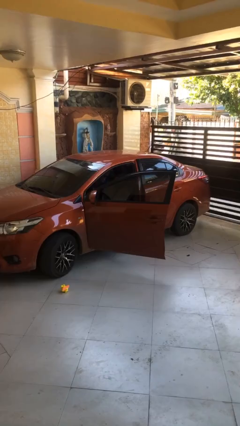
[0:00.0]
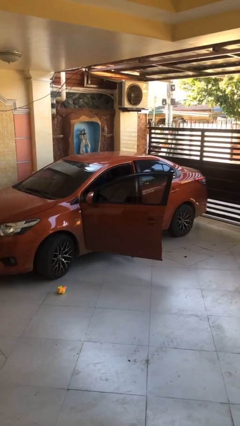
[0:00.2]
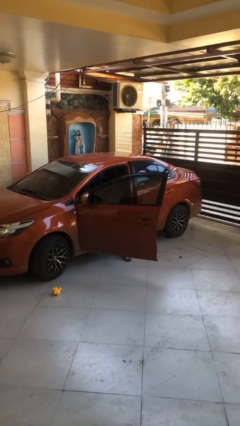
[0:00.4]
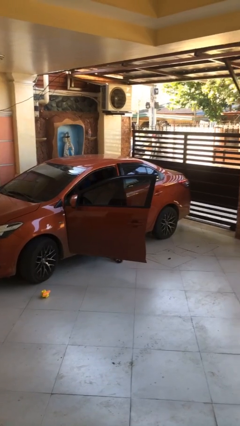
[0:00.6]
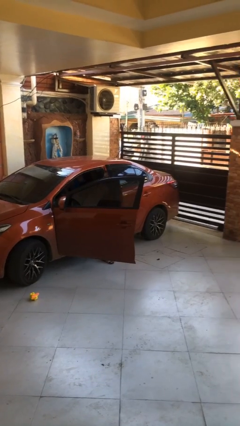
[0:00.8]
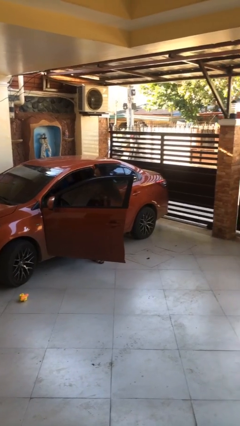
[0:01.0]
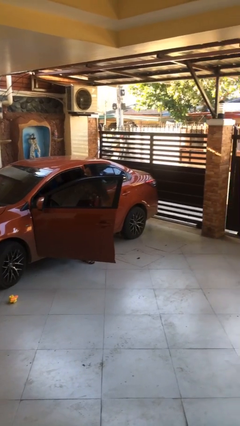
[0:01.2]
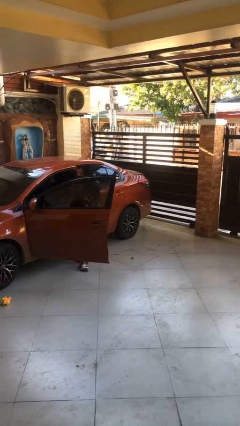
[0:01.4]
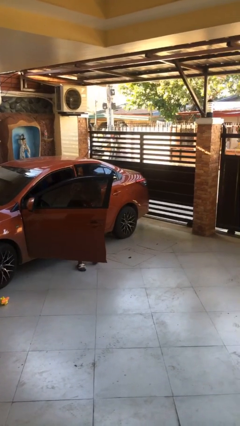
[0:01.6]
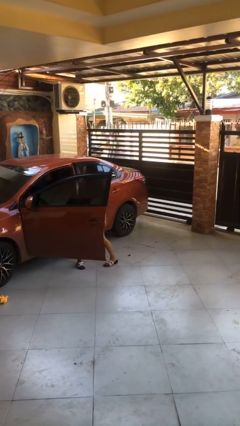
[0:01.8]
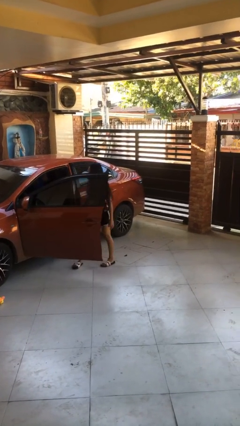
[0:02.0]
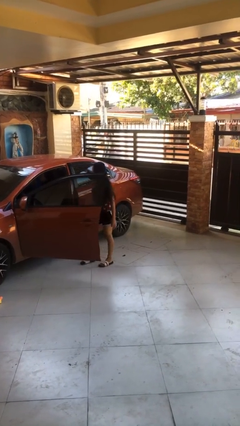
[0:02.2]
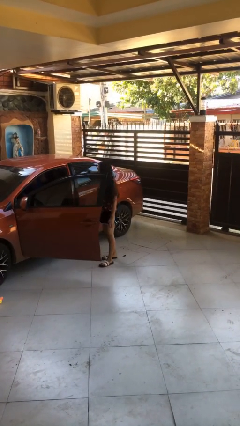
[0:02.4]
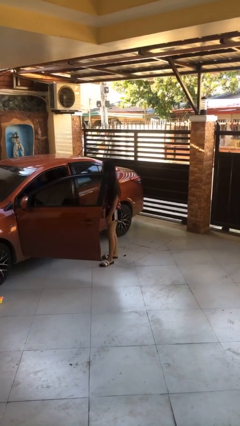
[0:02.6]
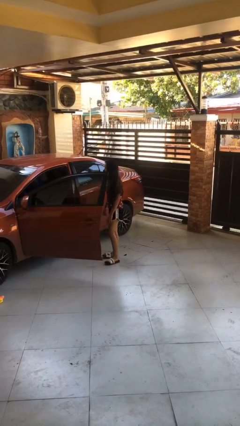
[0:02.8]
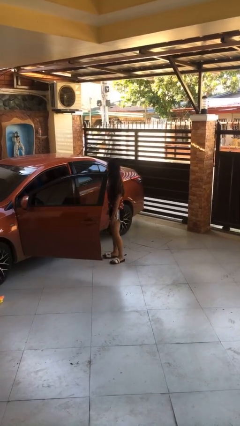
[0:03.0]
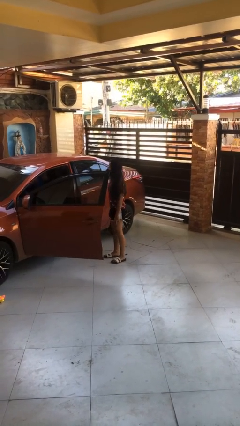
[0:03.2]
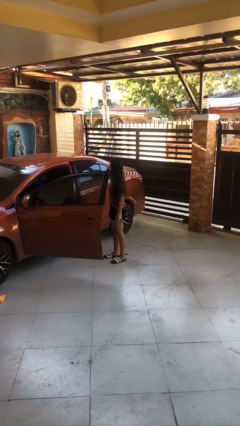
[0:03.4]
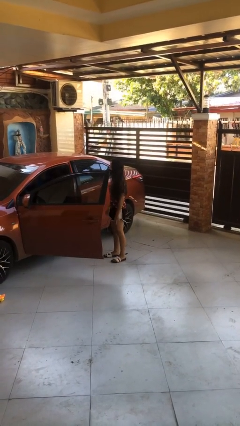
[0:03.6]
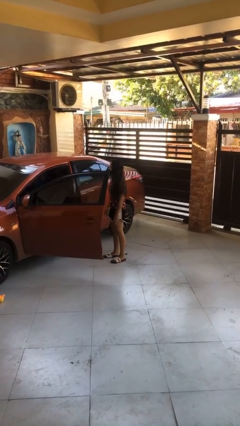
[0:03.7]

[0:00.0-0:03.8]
person exits car

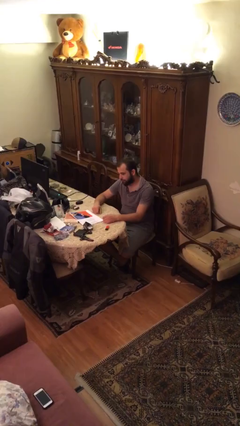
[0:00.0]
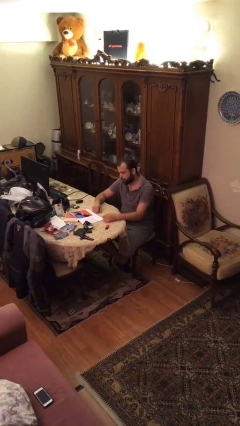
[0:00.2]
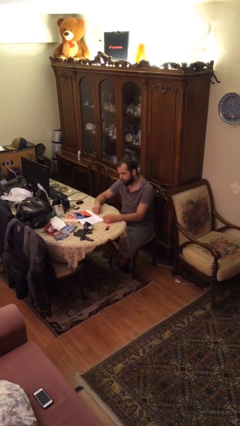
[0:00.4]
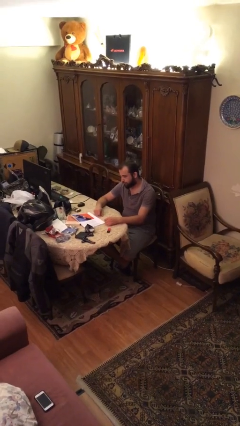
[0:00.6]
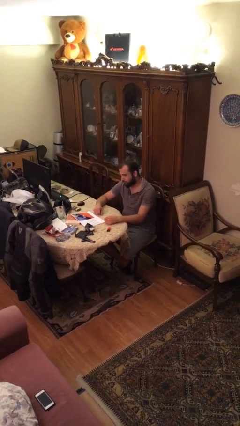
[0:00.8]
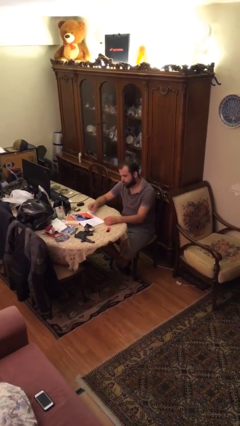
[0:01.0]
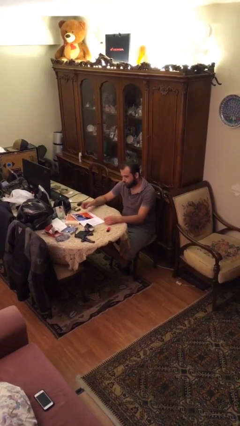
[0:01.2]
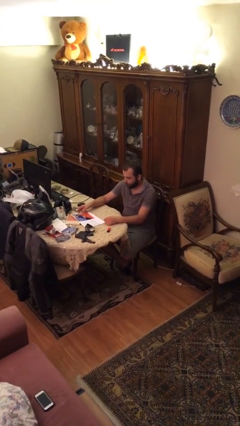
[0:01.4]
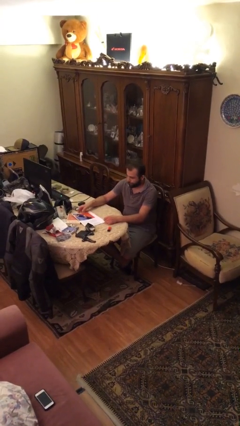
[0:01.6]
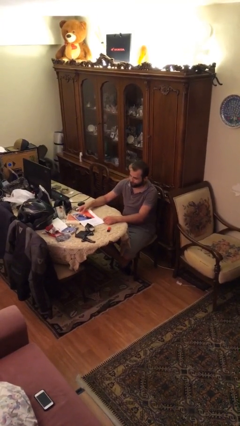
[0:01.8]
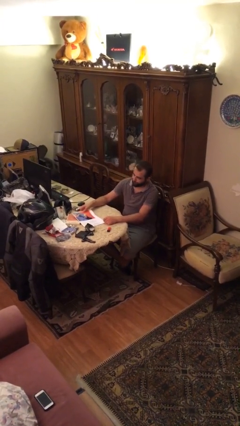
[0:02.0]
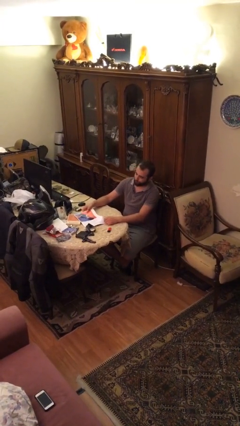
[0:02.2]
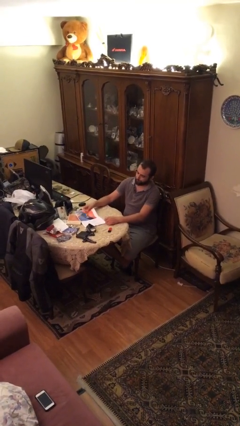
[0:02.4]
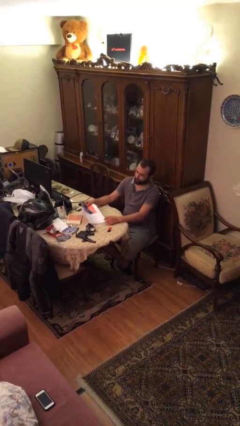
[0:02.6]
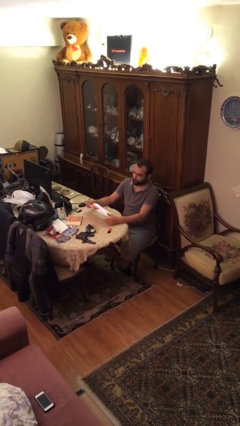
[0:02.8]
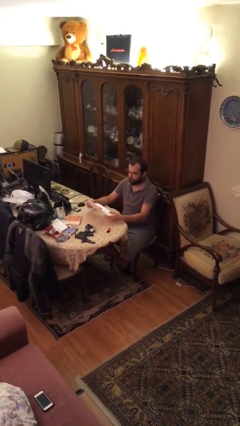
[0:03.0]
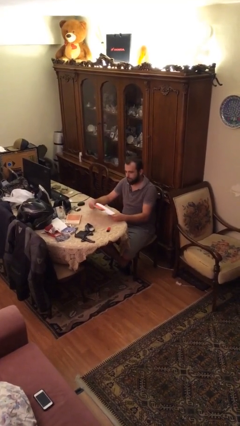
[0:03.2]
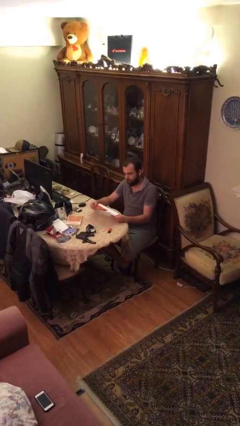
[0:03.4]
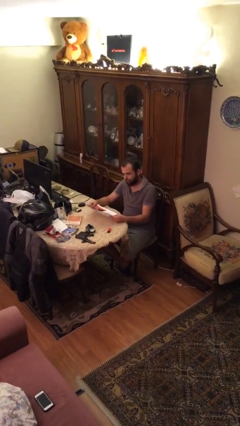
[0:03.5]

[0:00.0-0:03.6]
person picks up object from table

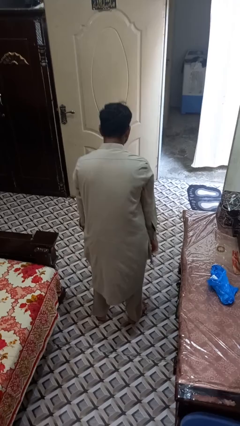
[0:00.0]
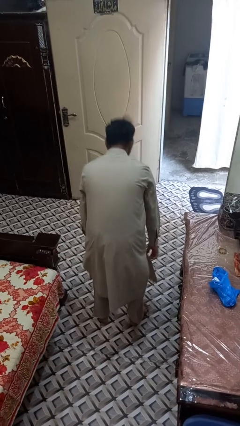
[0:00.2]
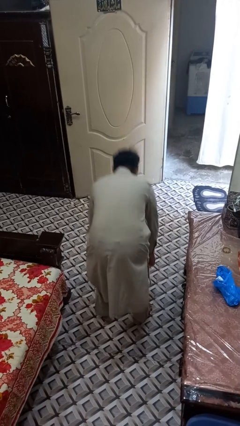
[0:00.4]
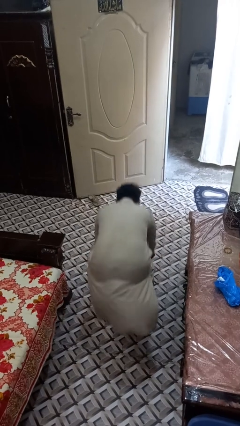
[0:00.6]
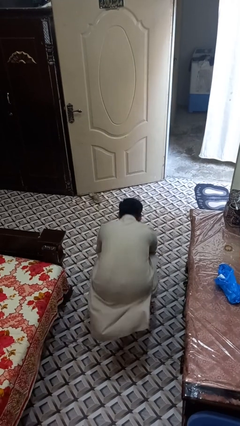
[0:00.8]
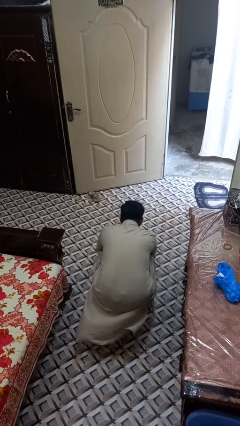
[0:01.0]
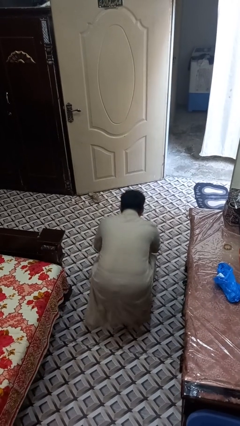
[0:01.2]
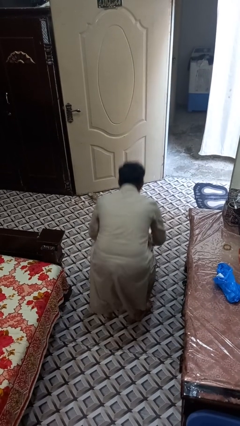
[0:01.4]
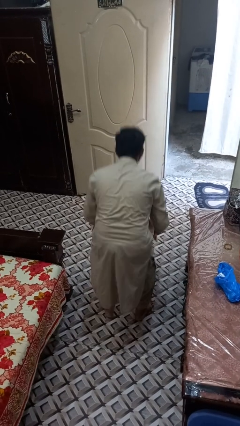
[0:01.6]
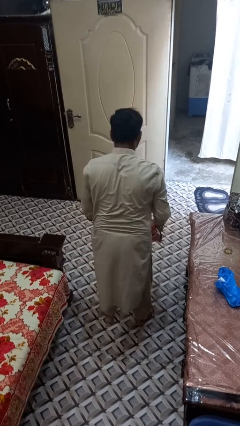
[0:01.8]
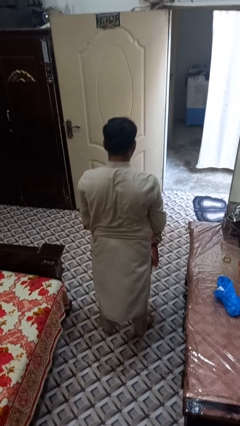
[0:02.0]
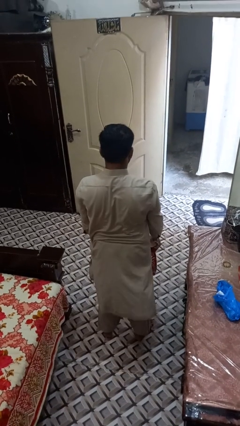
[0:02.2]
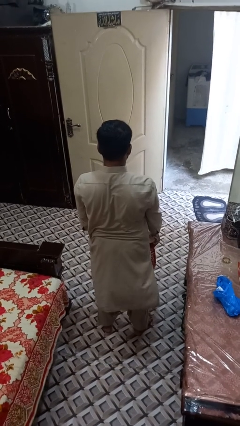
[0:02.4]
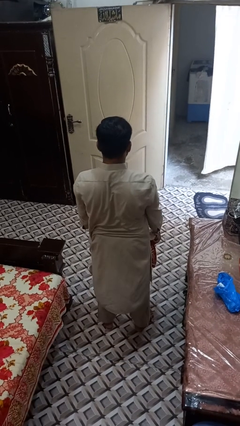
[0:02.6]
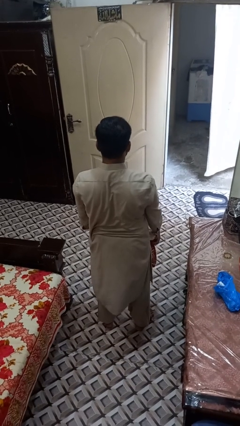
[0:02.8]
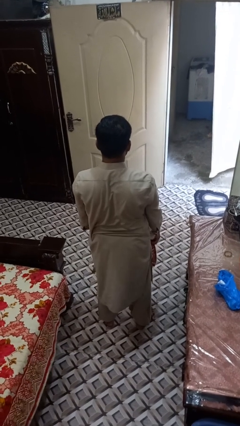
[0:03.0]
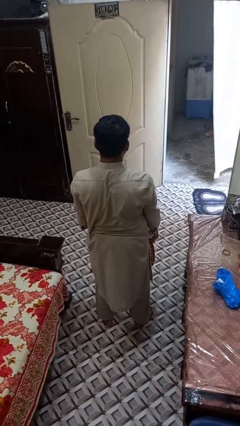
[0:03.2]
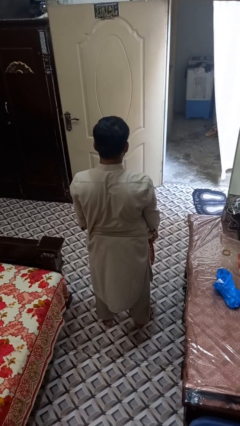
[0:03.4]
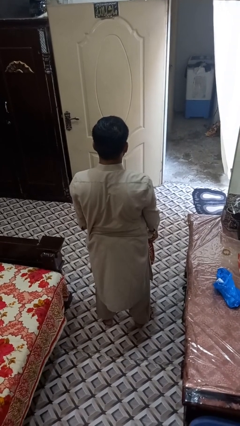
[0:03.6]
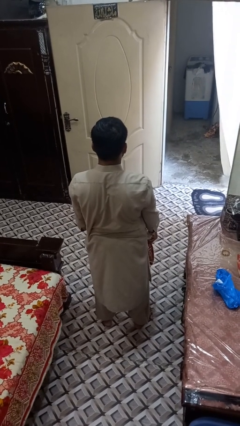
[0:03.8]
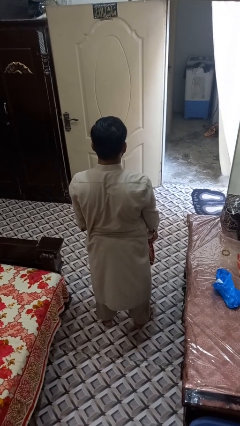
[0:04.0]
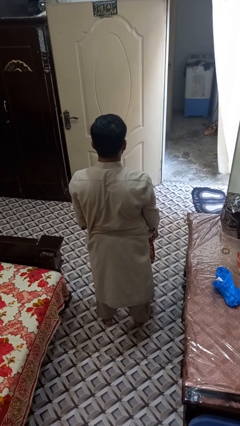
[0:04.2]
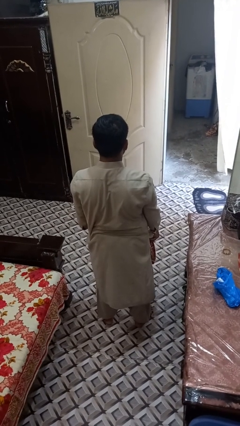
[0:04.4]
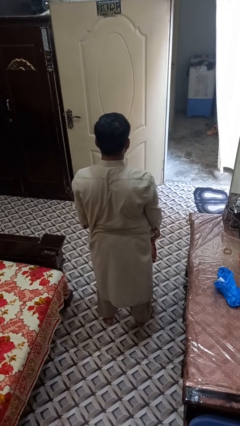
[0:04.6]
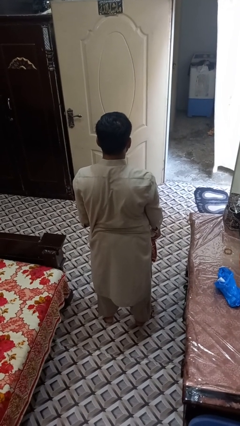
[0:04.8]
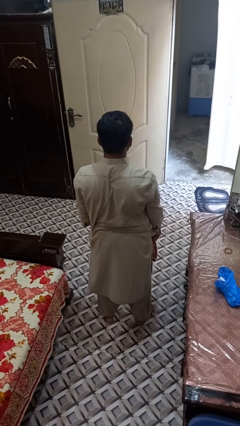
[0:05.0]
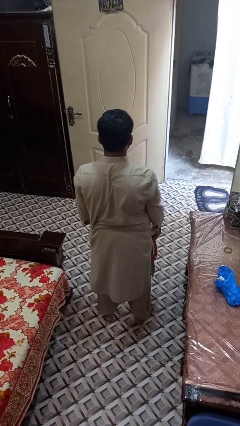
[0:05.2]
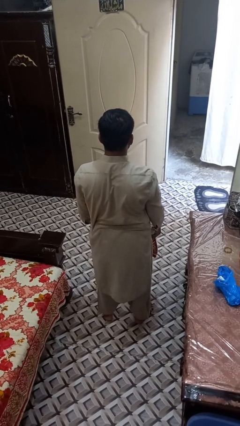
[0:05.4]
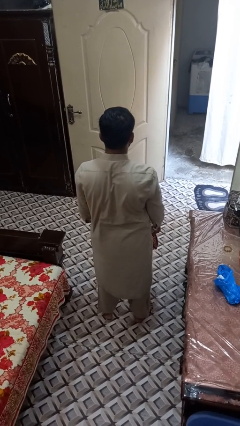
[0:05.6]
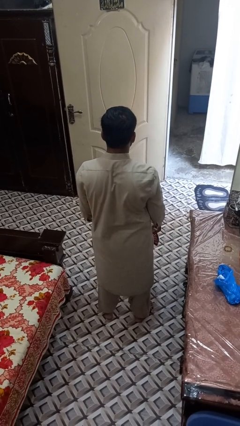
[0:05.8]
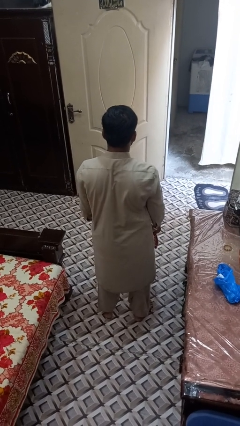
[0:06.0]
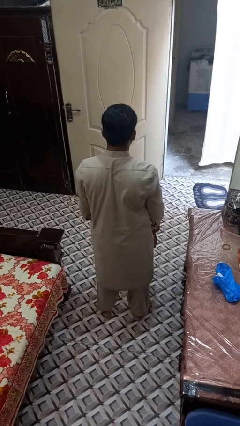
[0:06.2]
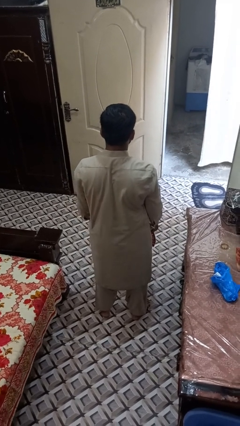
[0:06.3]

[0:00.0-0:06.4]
person picks up object from floor

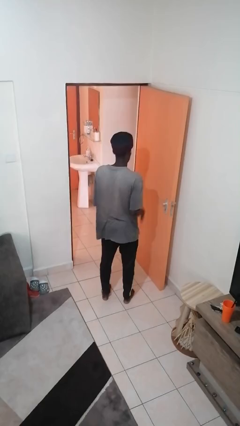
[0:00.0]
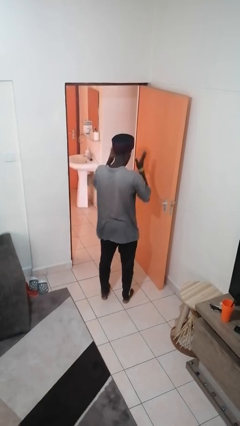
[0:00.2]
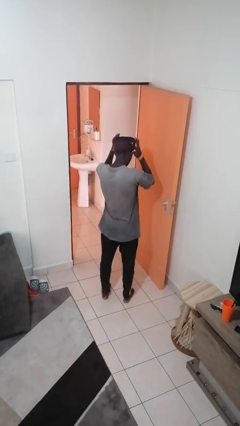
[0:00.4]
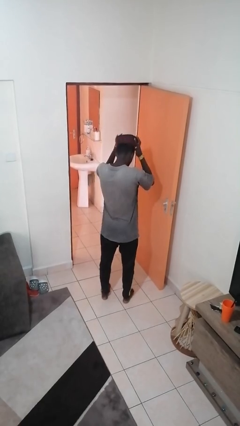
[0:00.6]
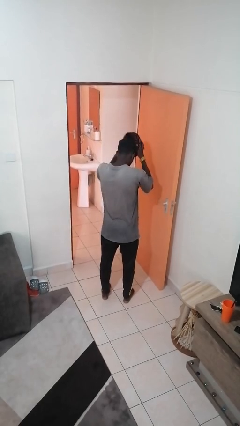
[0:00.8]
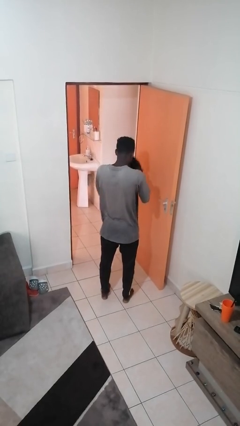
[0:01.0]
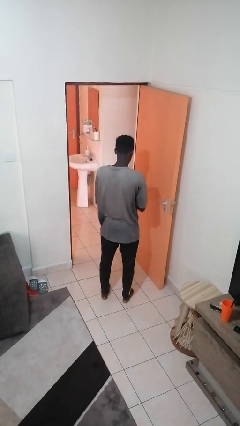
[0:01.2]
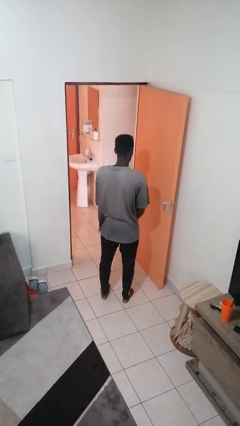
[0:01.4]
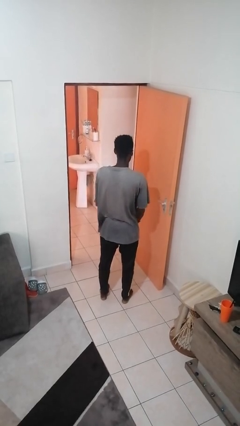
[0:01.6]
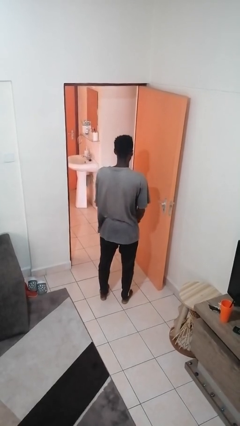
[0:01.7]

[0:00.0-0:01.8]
person takes off hat

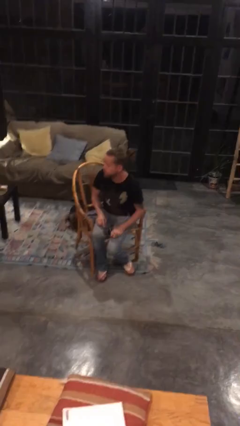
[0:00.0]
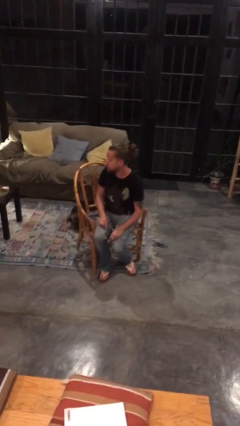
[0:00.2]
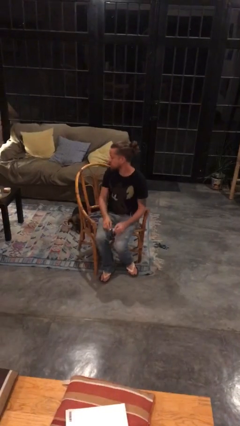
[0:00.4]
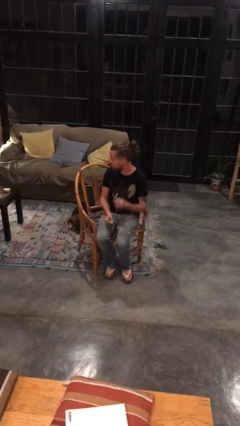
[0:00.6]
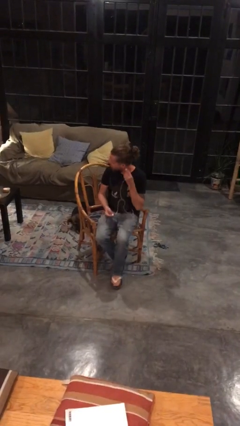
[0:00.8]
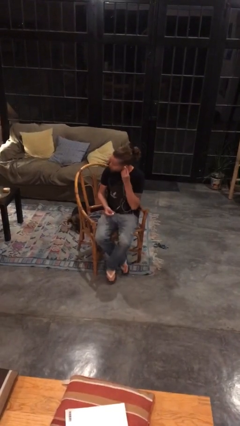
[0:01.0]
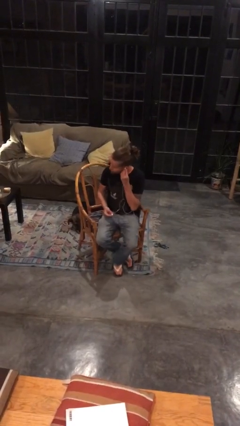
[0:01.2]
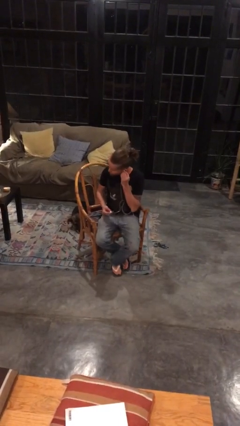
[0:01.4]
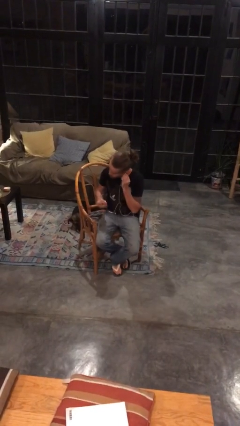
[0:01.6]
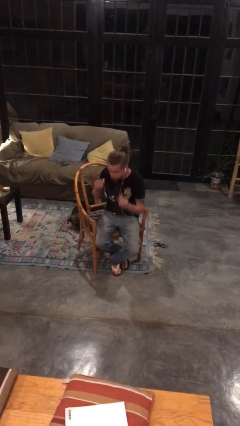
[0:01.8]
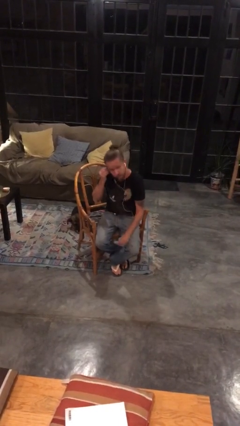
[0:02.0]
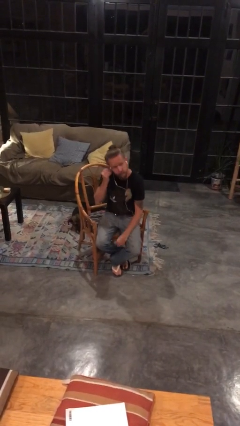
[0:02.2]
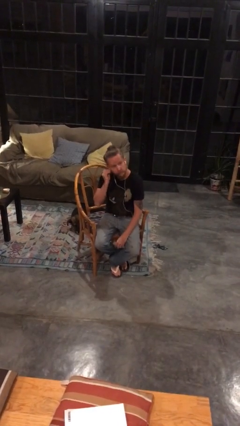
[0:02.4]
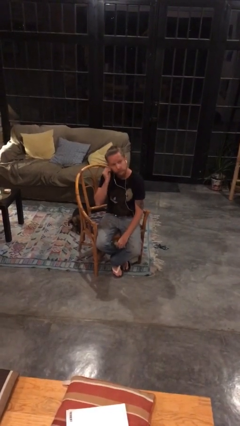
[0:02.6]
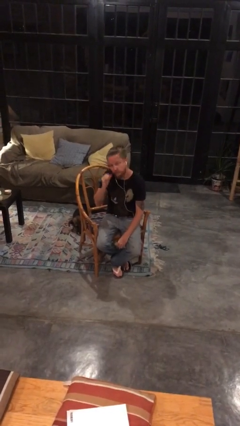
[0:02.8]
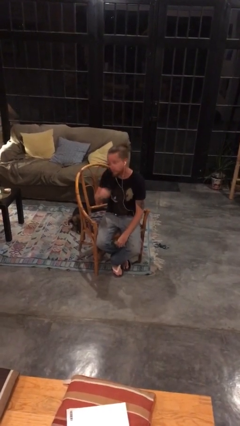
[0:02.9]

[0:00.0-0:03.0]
person puts on headphones
